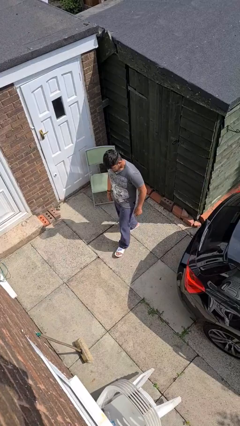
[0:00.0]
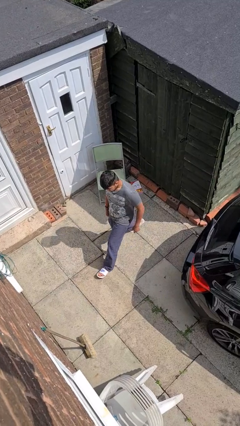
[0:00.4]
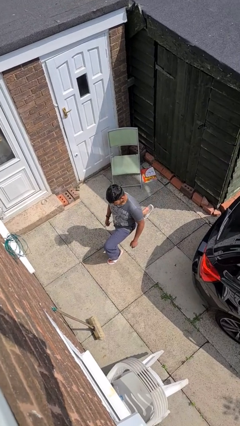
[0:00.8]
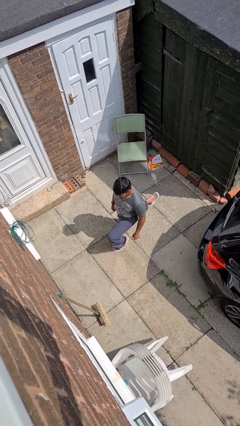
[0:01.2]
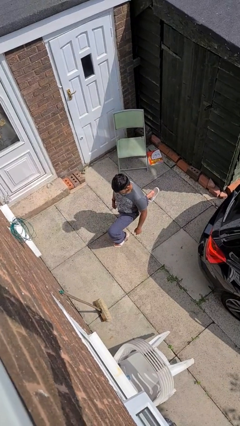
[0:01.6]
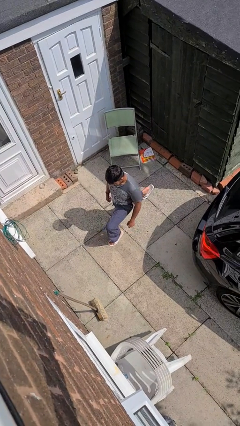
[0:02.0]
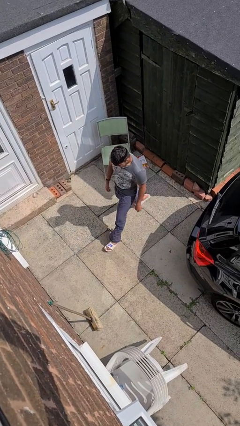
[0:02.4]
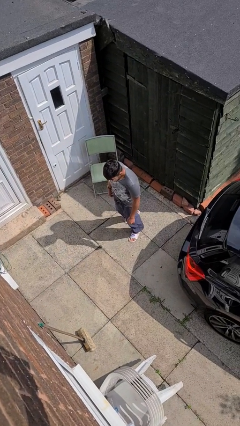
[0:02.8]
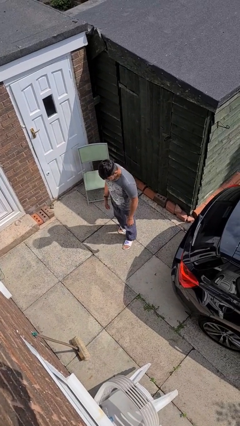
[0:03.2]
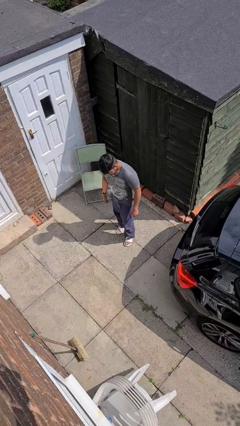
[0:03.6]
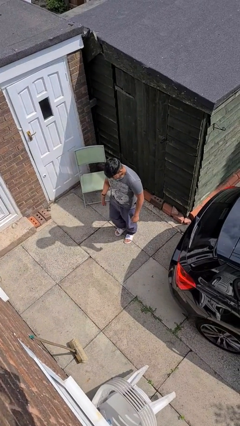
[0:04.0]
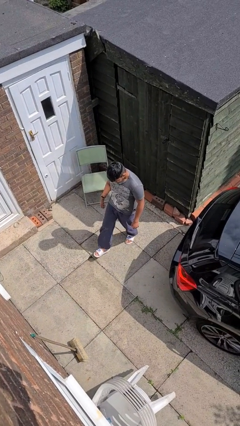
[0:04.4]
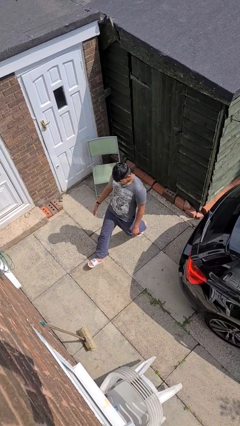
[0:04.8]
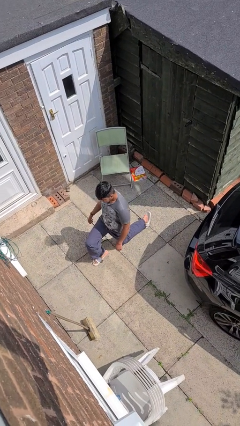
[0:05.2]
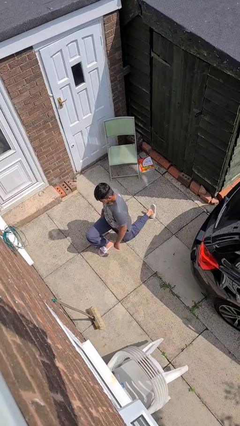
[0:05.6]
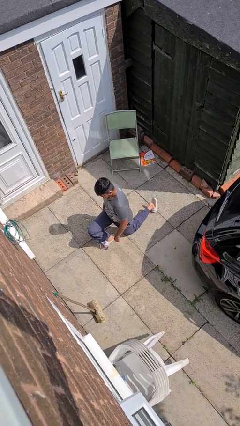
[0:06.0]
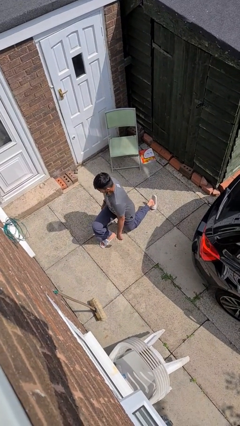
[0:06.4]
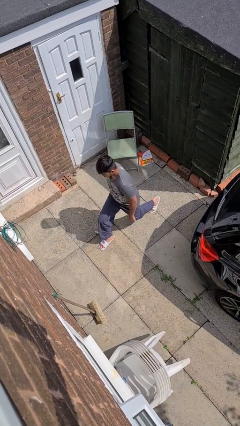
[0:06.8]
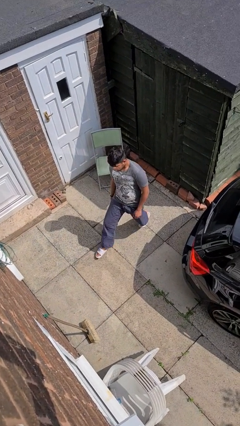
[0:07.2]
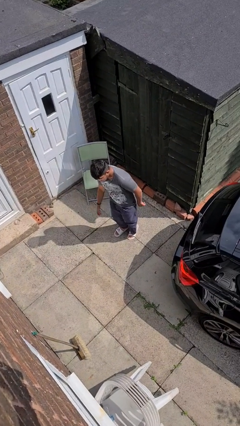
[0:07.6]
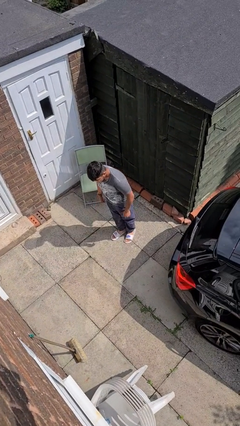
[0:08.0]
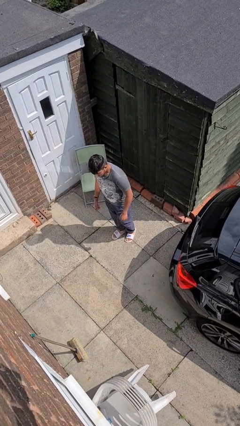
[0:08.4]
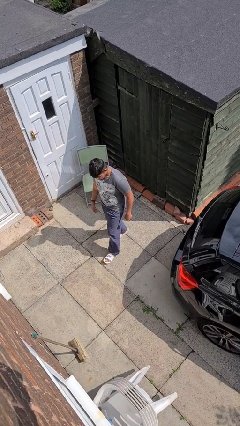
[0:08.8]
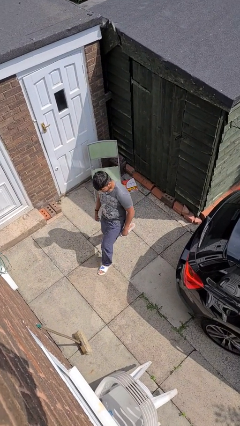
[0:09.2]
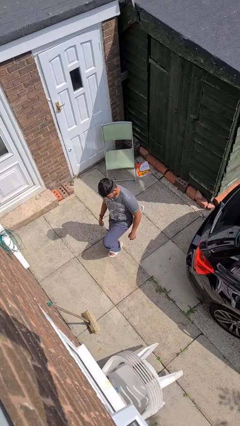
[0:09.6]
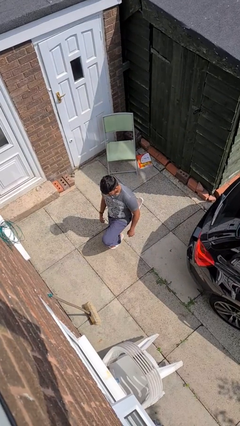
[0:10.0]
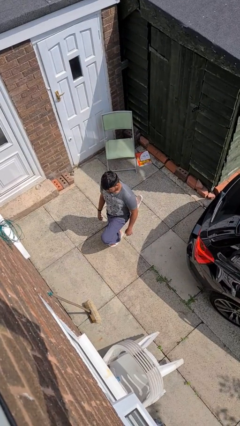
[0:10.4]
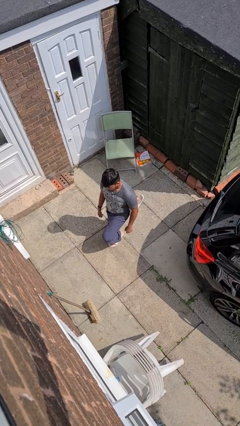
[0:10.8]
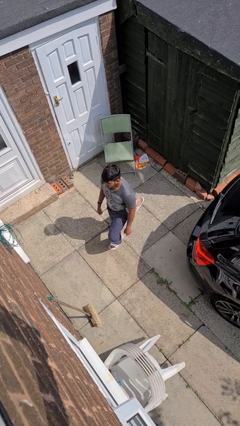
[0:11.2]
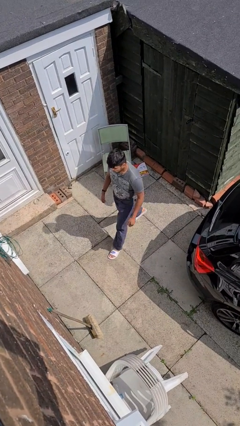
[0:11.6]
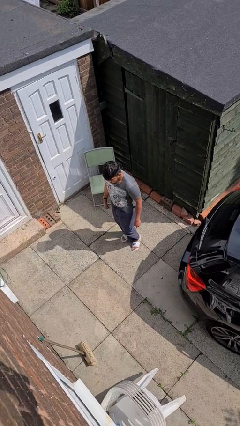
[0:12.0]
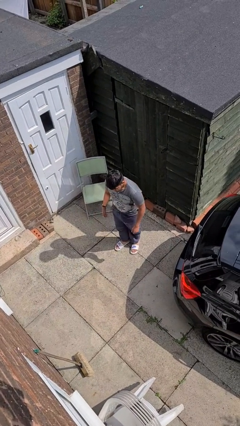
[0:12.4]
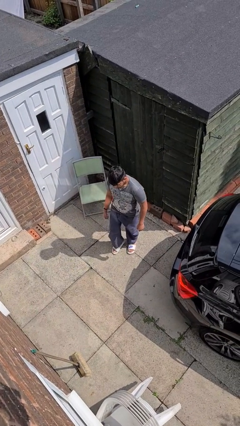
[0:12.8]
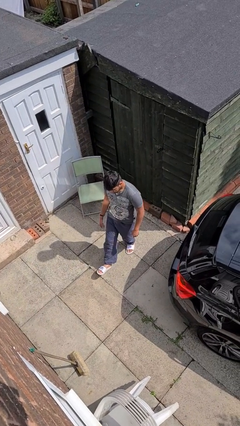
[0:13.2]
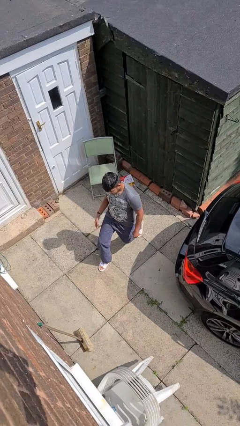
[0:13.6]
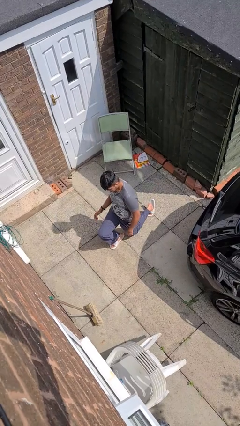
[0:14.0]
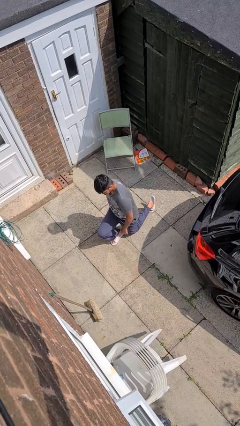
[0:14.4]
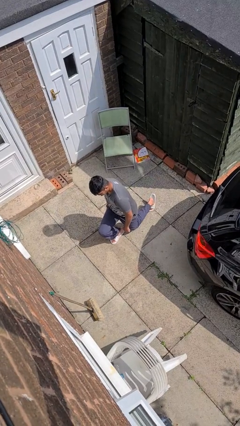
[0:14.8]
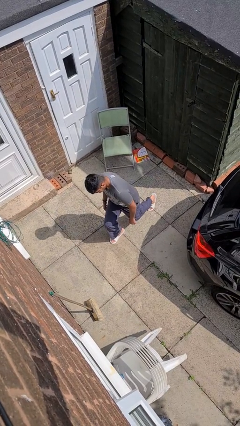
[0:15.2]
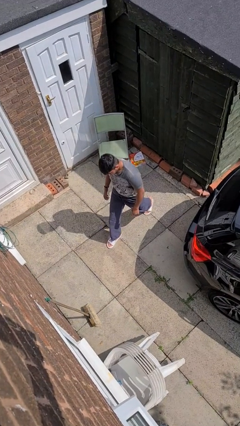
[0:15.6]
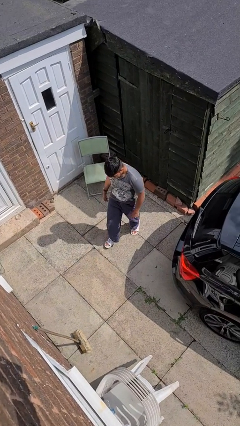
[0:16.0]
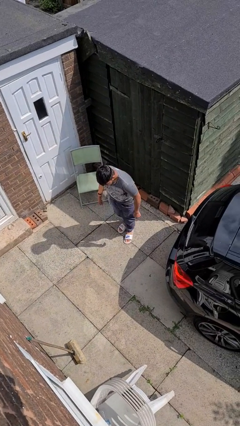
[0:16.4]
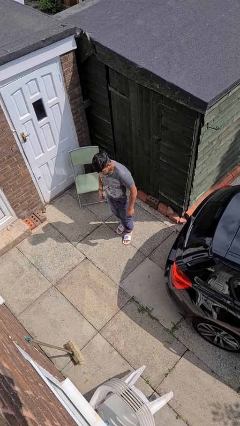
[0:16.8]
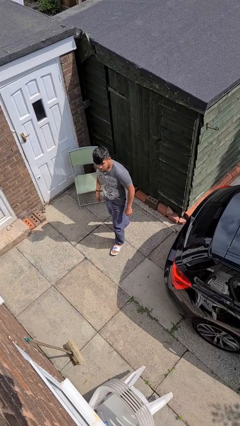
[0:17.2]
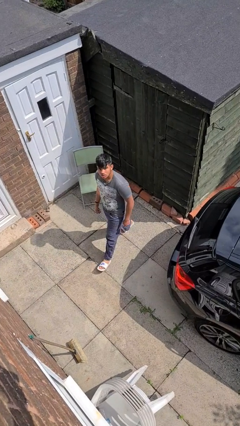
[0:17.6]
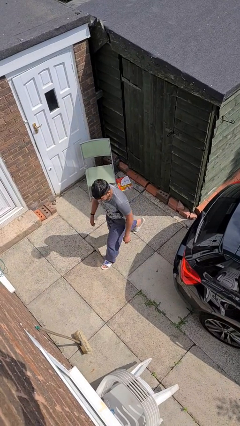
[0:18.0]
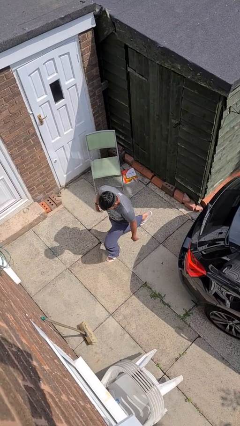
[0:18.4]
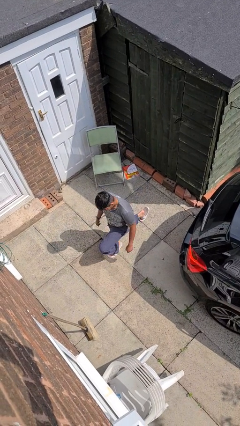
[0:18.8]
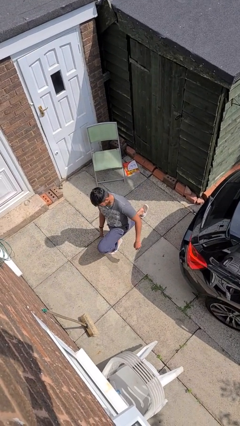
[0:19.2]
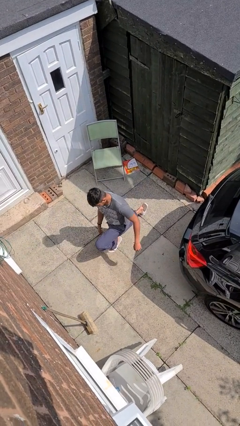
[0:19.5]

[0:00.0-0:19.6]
person exercises with lunges

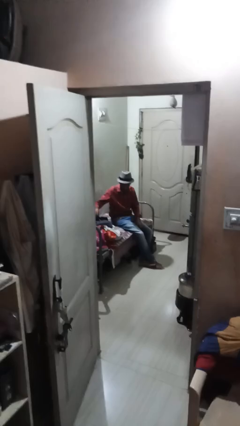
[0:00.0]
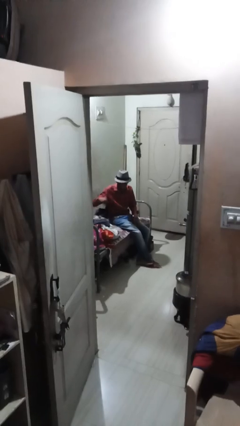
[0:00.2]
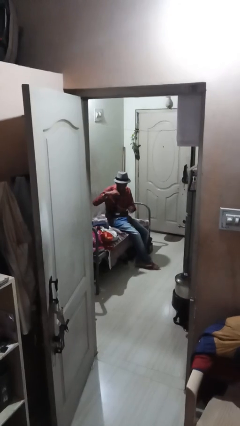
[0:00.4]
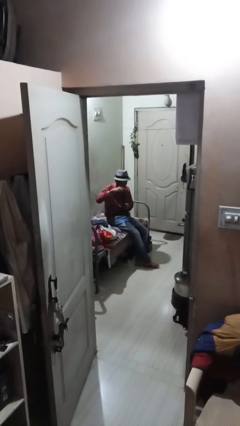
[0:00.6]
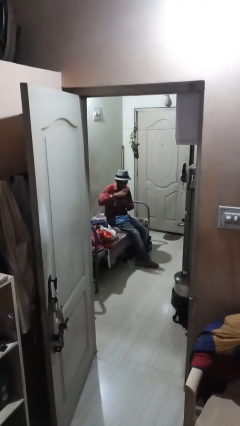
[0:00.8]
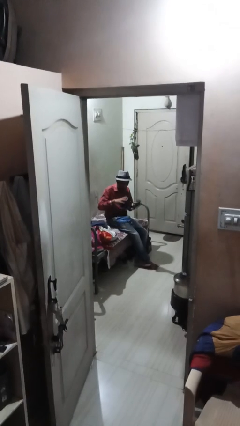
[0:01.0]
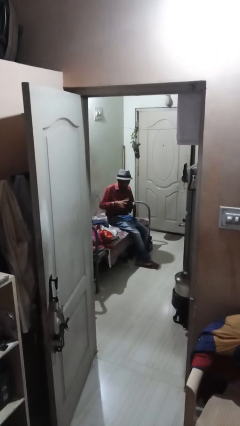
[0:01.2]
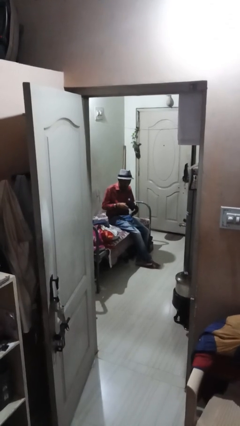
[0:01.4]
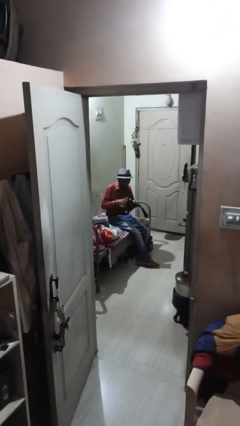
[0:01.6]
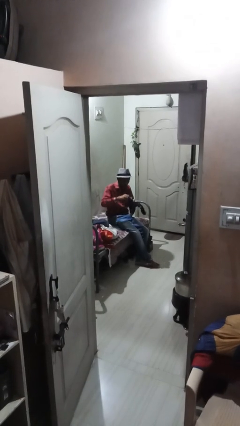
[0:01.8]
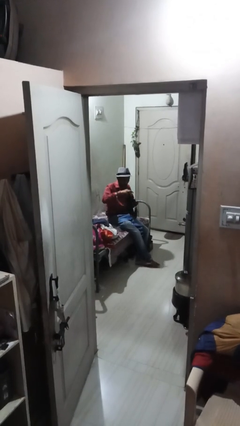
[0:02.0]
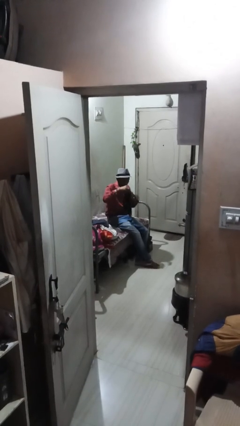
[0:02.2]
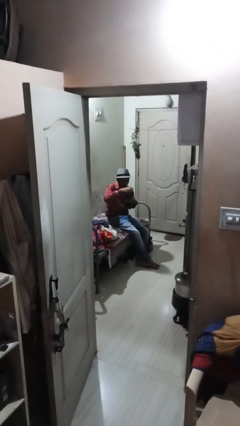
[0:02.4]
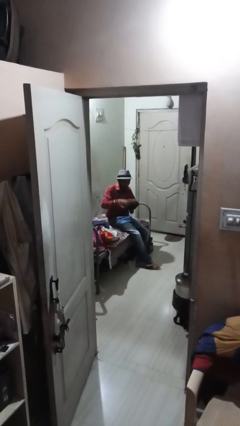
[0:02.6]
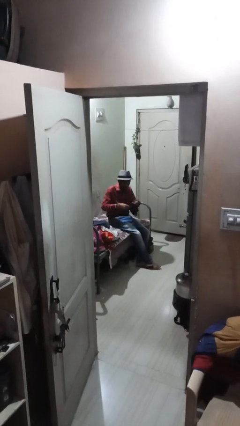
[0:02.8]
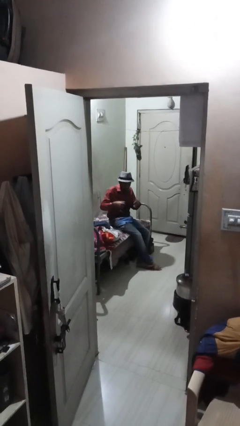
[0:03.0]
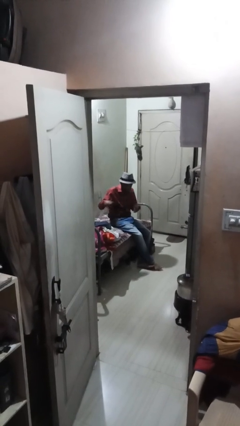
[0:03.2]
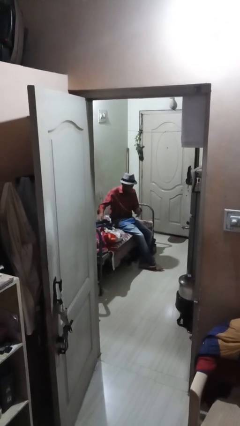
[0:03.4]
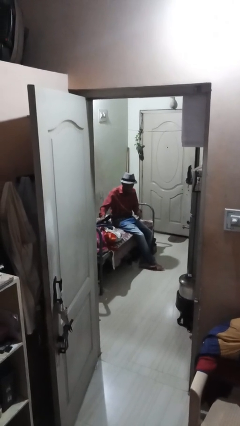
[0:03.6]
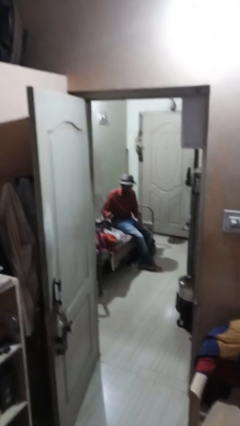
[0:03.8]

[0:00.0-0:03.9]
person folds socks

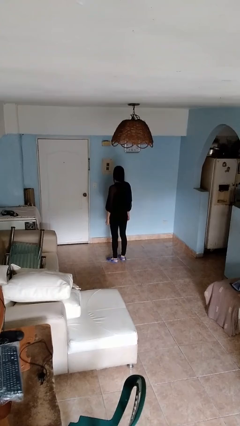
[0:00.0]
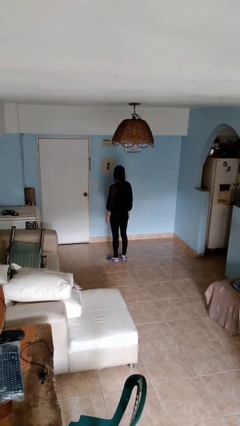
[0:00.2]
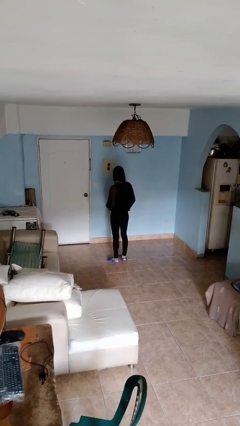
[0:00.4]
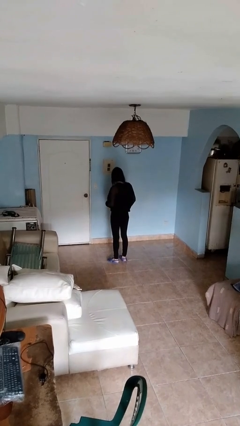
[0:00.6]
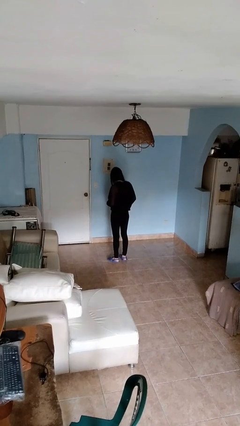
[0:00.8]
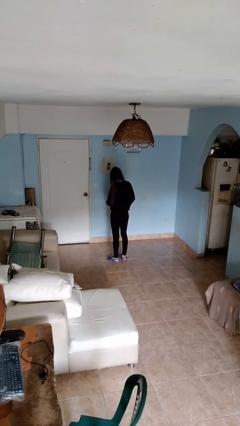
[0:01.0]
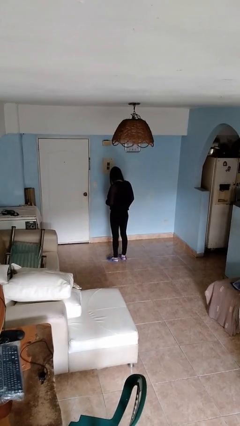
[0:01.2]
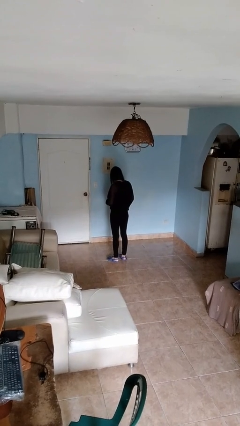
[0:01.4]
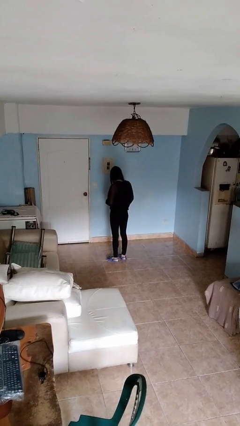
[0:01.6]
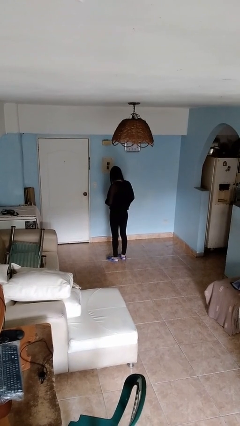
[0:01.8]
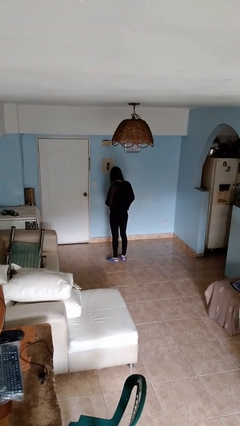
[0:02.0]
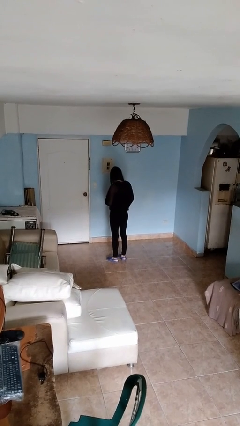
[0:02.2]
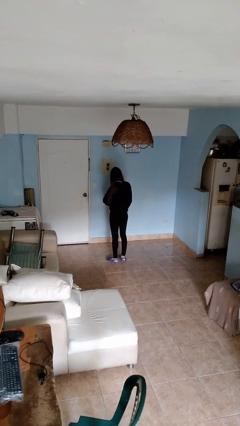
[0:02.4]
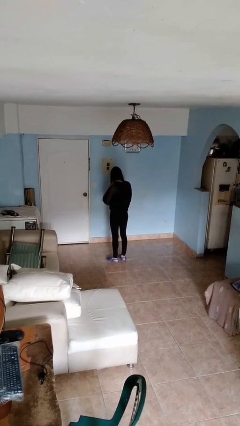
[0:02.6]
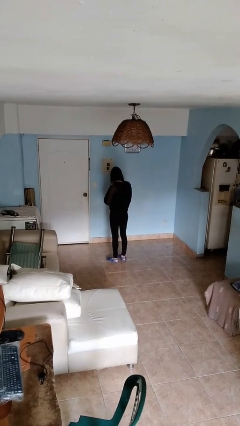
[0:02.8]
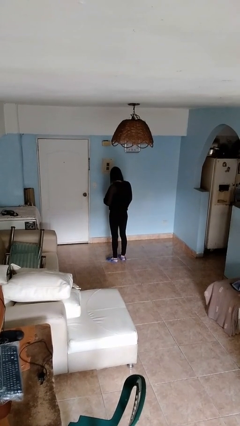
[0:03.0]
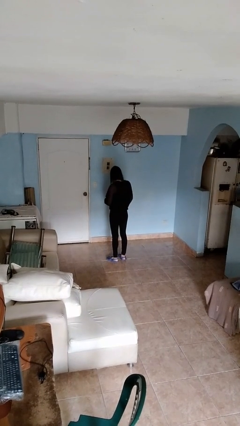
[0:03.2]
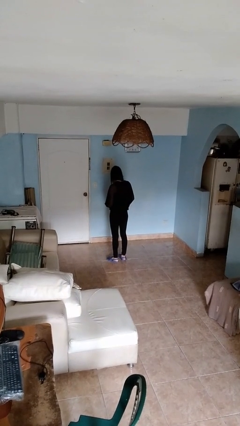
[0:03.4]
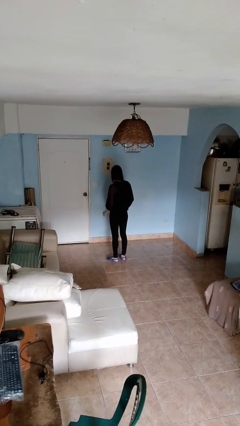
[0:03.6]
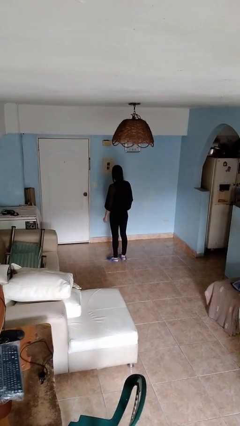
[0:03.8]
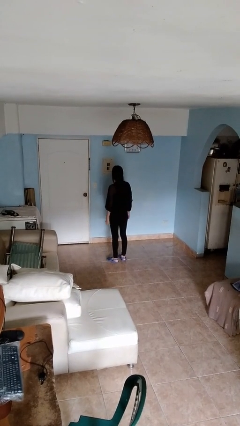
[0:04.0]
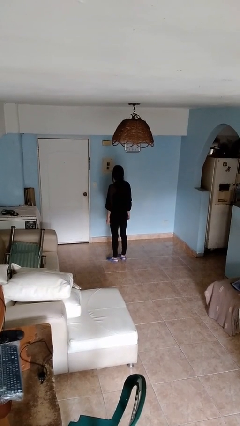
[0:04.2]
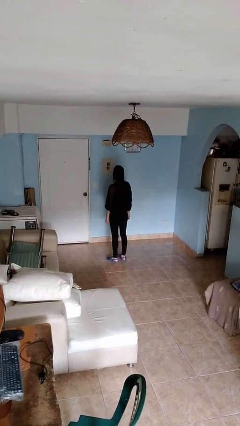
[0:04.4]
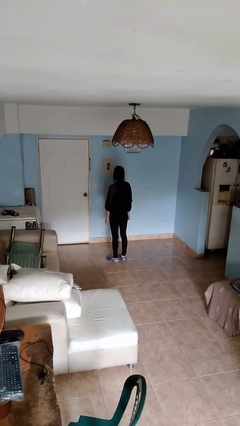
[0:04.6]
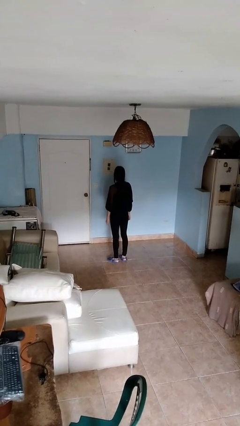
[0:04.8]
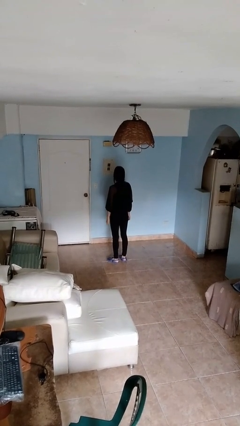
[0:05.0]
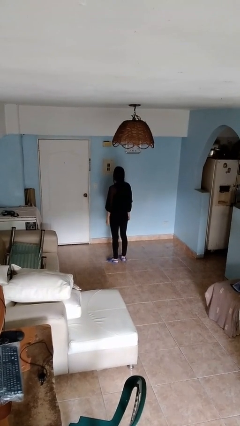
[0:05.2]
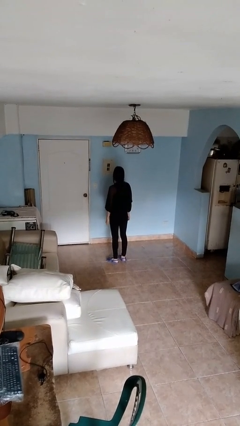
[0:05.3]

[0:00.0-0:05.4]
person unbuttons shirt
